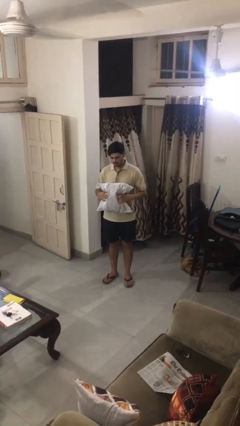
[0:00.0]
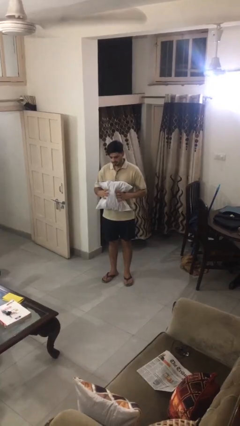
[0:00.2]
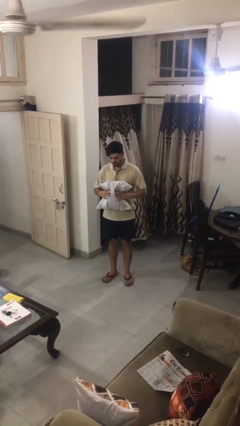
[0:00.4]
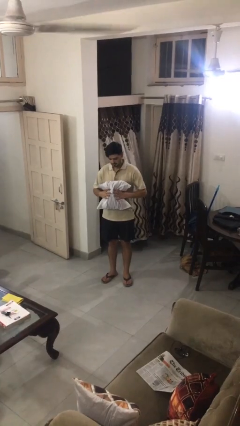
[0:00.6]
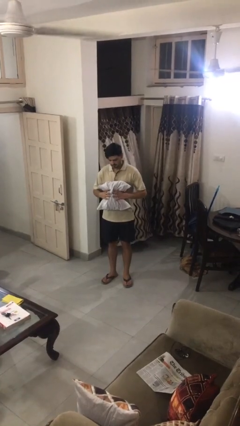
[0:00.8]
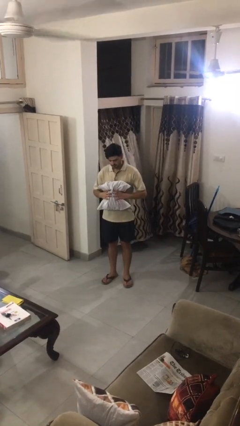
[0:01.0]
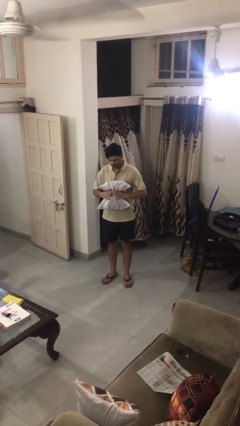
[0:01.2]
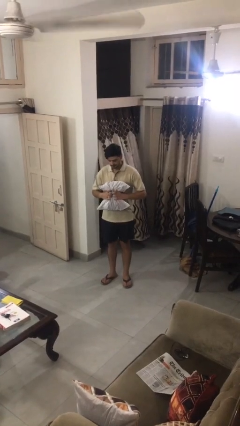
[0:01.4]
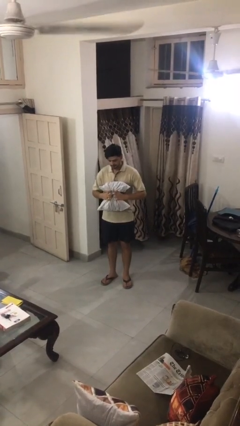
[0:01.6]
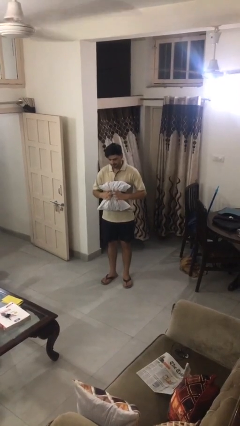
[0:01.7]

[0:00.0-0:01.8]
person squeezes object

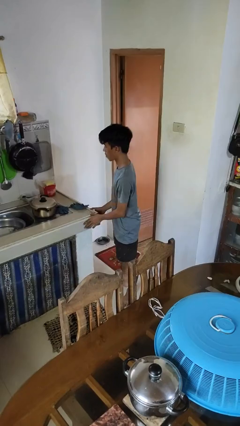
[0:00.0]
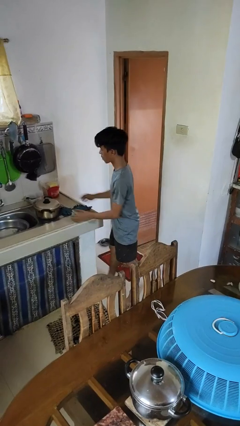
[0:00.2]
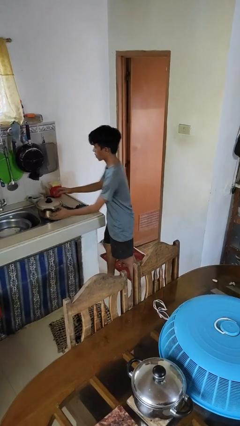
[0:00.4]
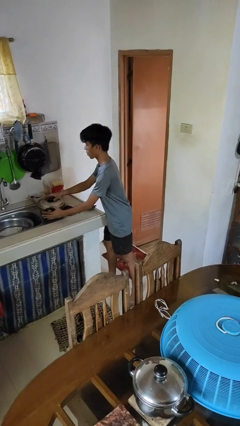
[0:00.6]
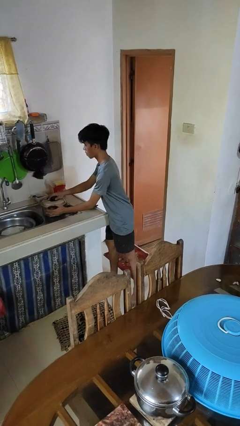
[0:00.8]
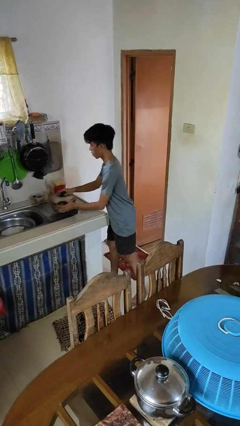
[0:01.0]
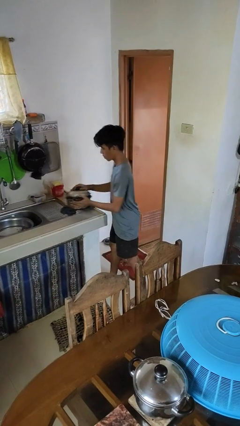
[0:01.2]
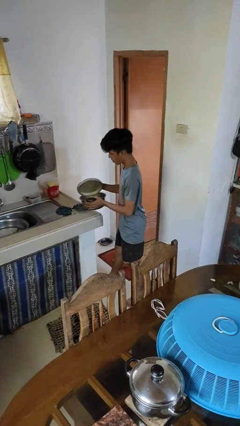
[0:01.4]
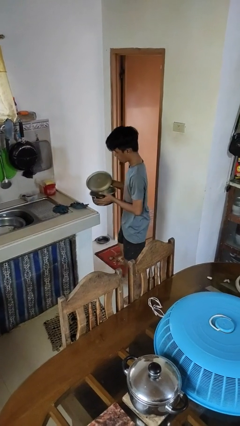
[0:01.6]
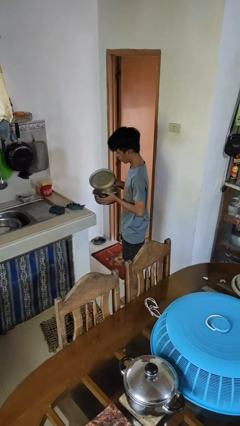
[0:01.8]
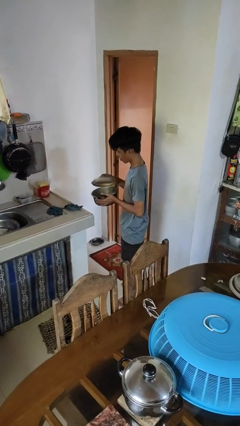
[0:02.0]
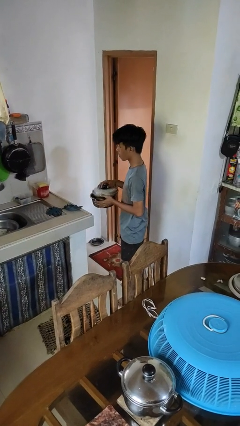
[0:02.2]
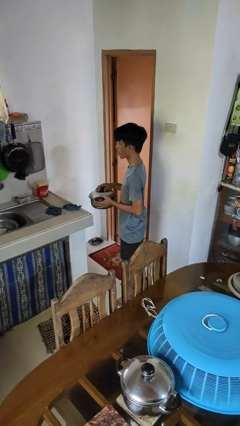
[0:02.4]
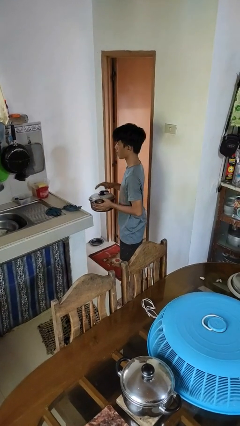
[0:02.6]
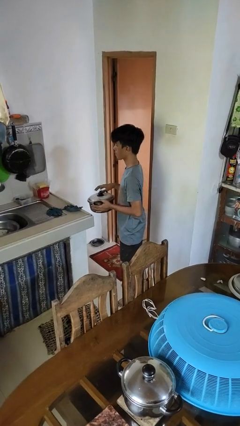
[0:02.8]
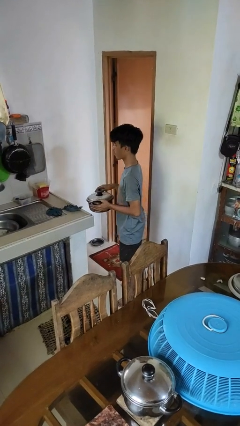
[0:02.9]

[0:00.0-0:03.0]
person picks up object from countertop

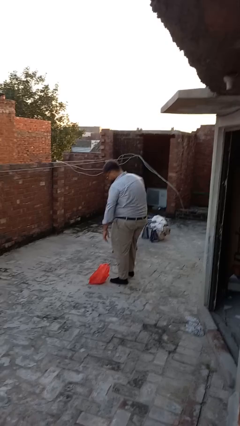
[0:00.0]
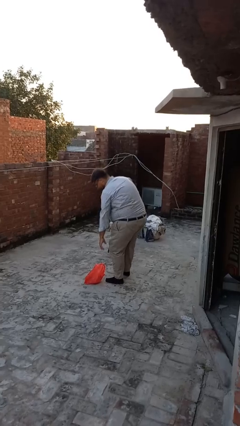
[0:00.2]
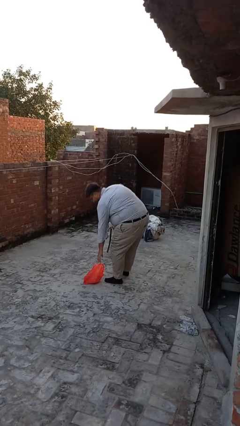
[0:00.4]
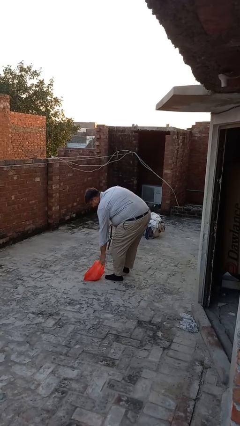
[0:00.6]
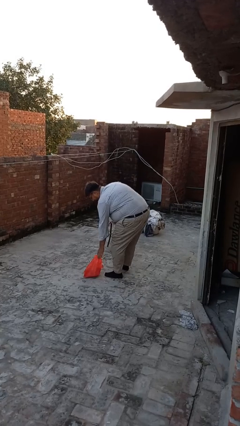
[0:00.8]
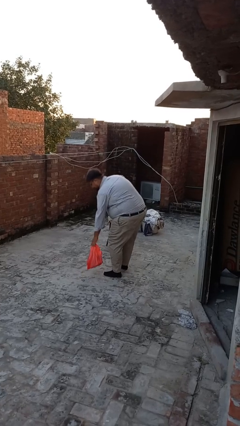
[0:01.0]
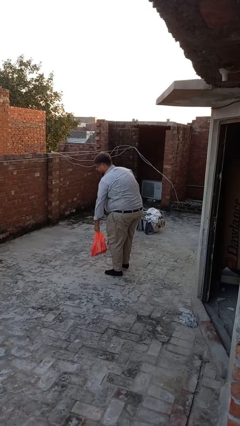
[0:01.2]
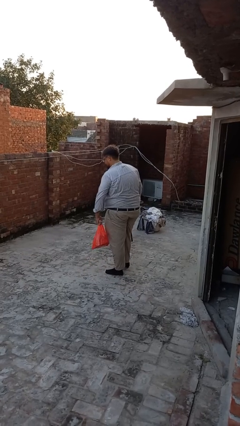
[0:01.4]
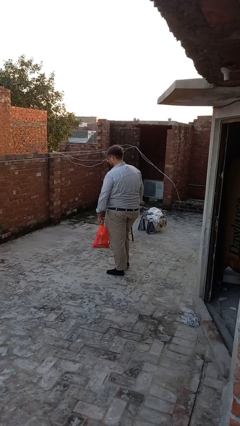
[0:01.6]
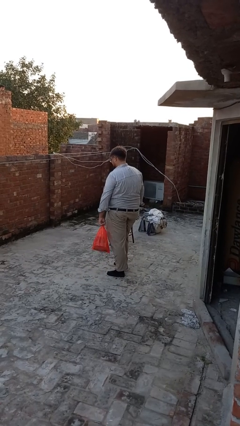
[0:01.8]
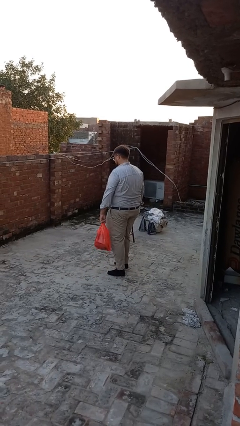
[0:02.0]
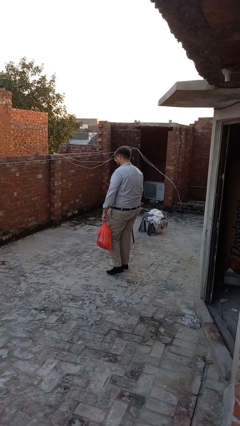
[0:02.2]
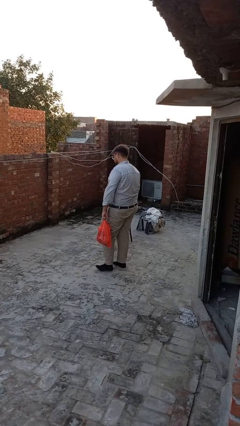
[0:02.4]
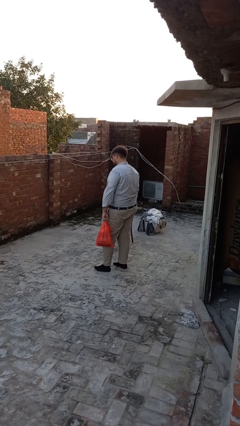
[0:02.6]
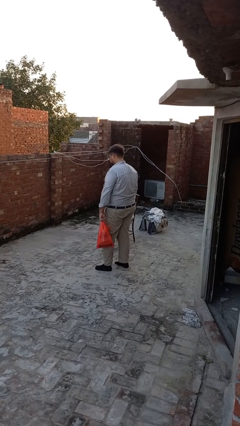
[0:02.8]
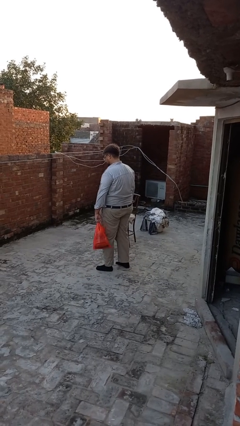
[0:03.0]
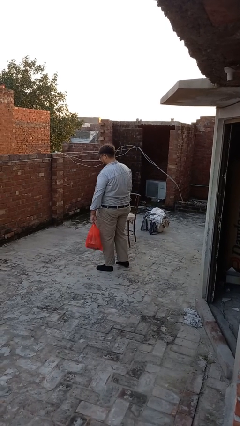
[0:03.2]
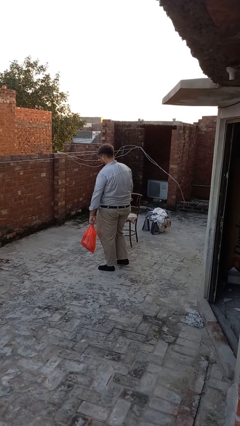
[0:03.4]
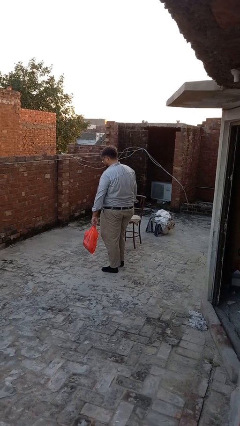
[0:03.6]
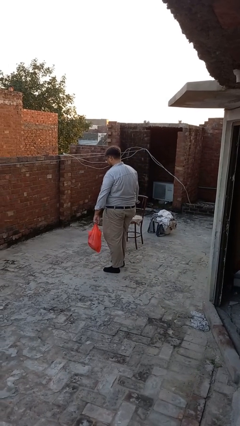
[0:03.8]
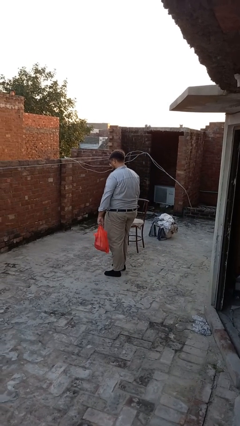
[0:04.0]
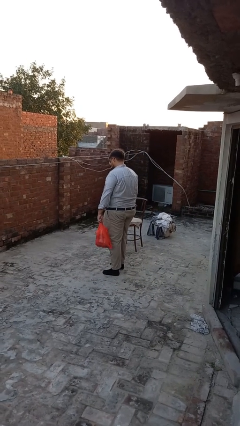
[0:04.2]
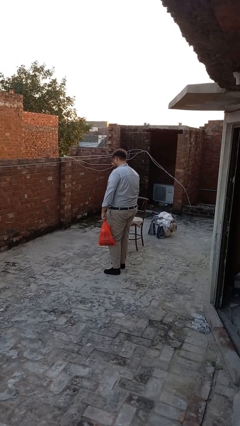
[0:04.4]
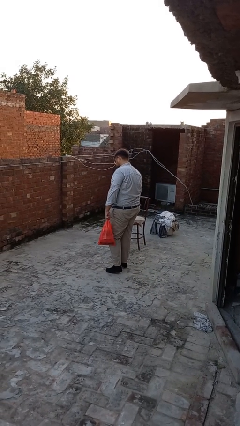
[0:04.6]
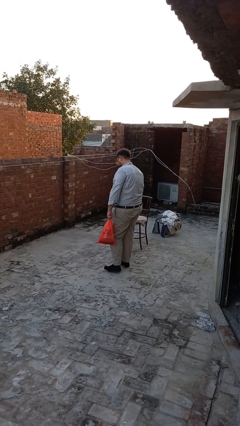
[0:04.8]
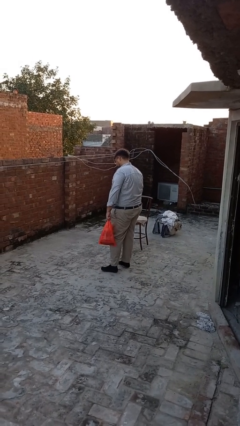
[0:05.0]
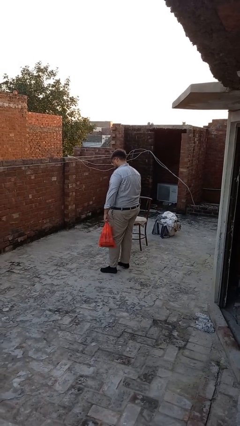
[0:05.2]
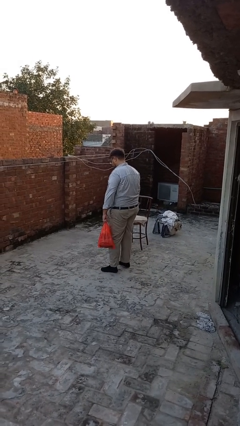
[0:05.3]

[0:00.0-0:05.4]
person carries groceries

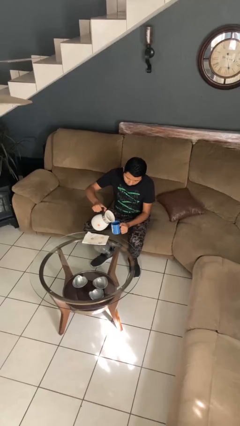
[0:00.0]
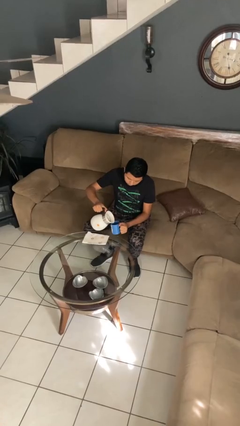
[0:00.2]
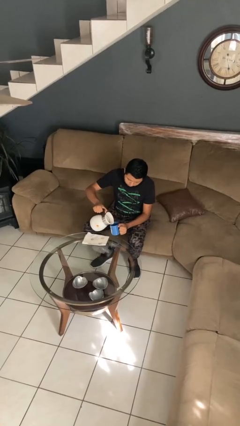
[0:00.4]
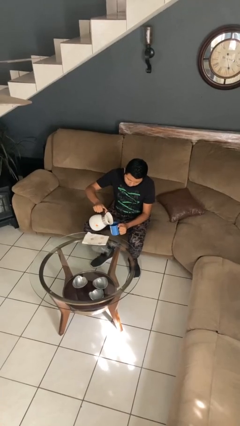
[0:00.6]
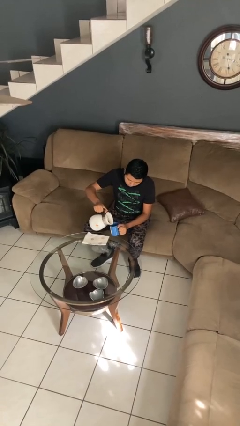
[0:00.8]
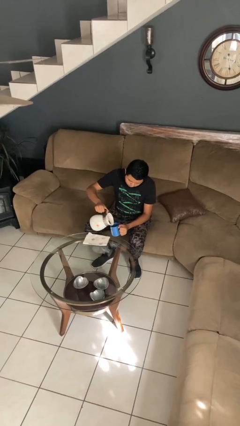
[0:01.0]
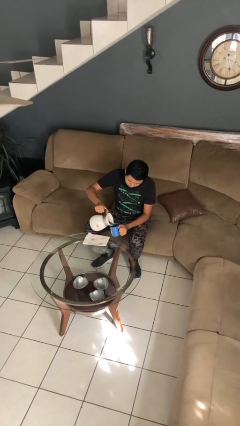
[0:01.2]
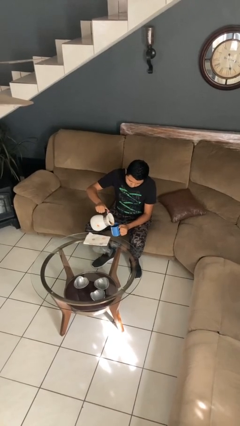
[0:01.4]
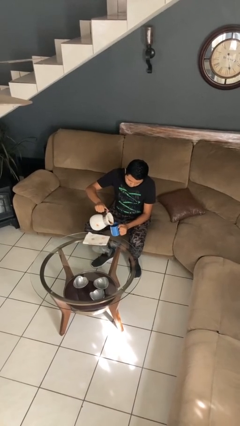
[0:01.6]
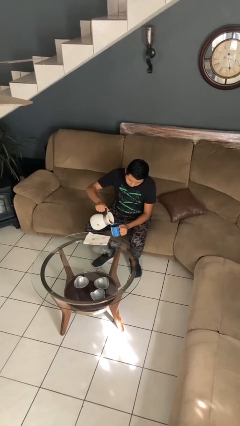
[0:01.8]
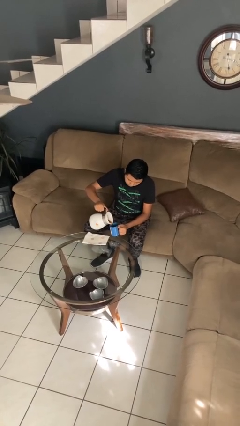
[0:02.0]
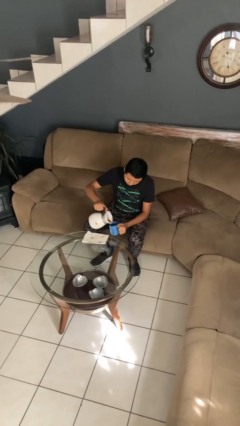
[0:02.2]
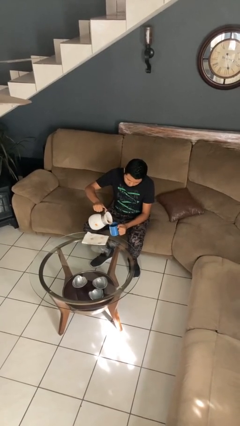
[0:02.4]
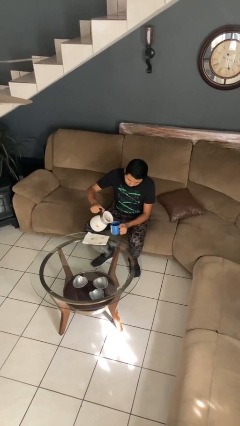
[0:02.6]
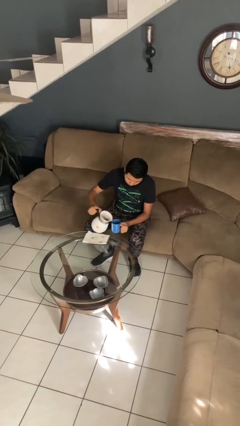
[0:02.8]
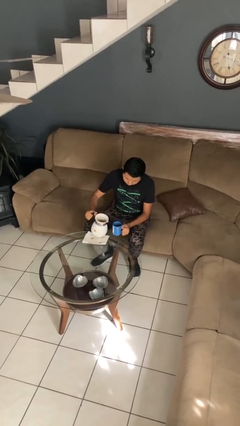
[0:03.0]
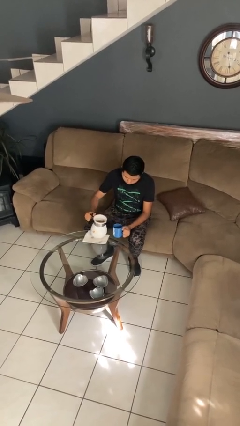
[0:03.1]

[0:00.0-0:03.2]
person pours coffee into mug

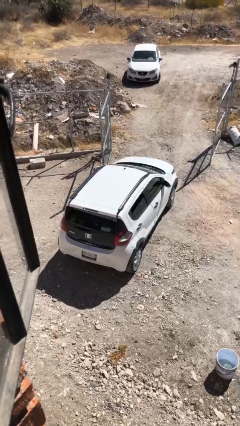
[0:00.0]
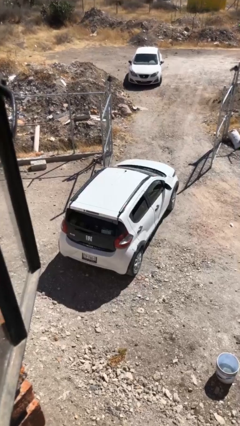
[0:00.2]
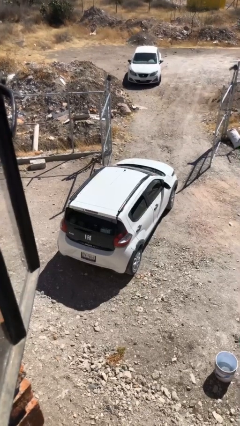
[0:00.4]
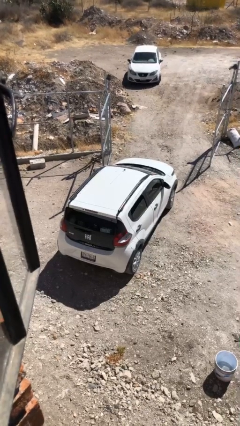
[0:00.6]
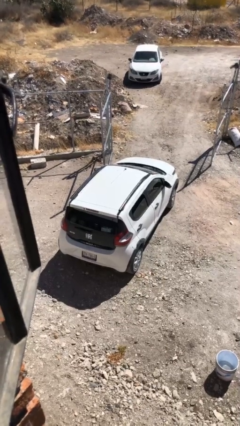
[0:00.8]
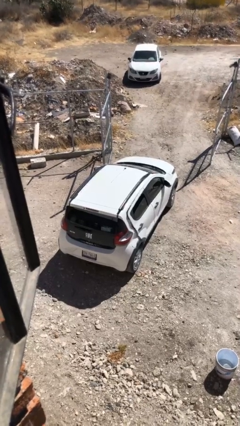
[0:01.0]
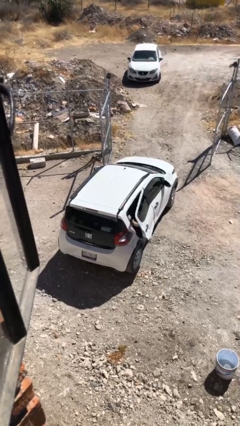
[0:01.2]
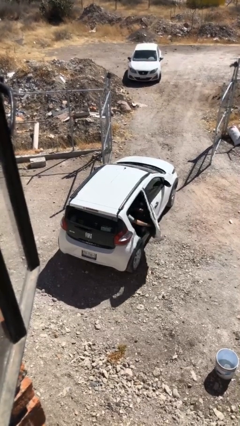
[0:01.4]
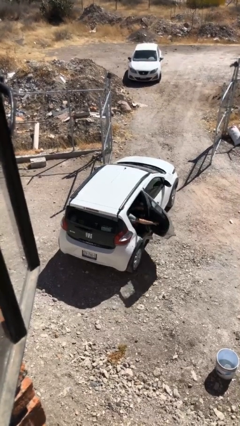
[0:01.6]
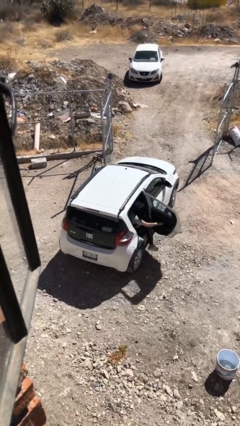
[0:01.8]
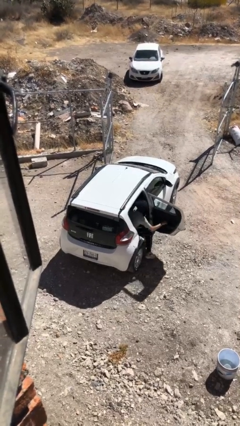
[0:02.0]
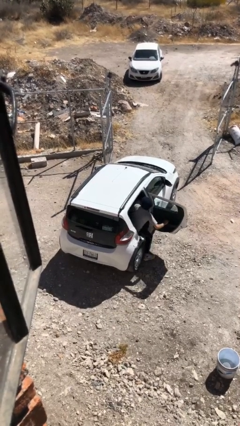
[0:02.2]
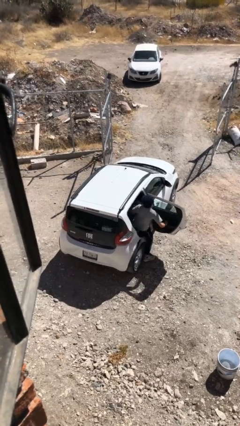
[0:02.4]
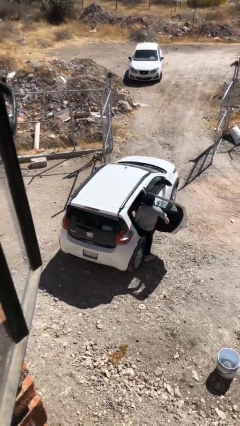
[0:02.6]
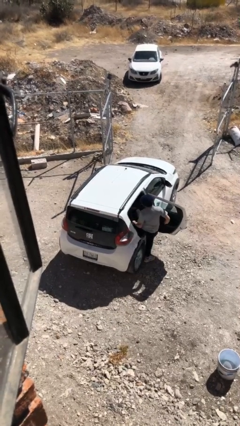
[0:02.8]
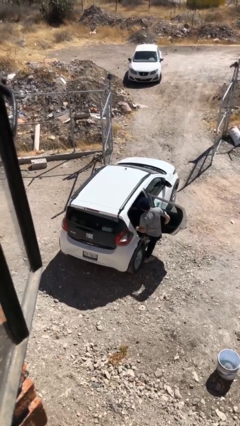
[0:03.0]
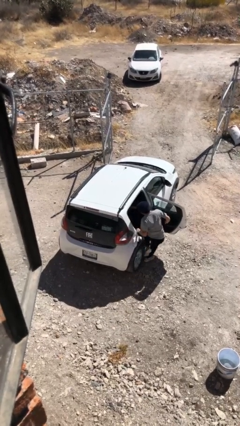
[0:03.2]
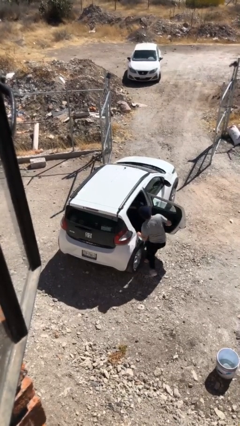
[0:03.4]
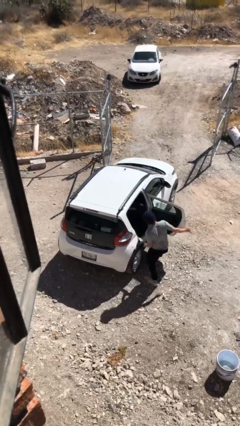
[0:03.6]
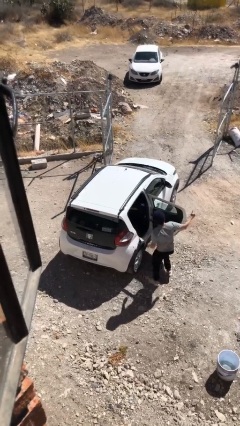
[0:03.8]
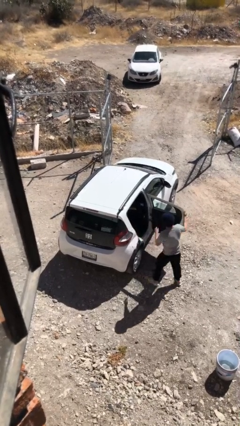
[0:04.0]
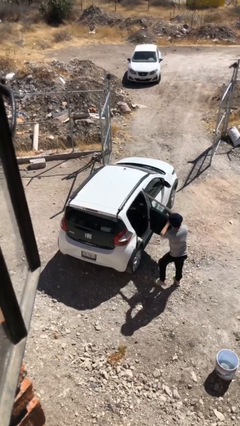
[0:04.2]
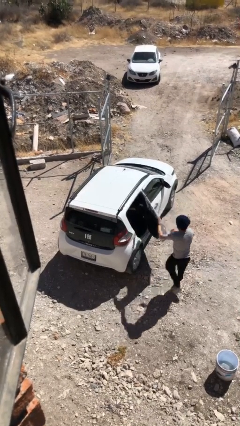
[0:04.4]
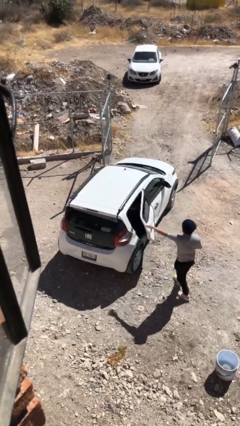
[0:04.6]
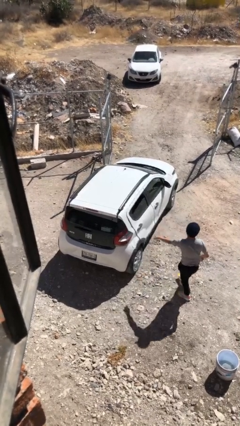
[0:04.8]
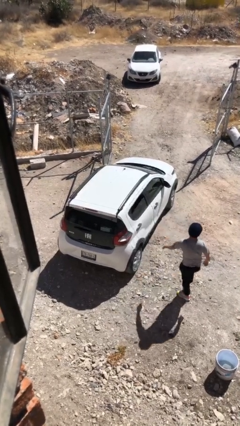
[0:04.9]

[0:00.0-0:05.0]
car drops off person
